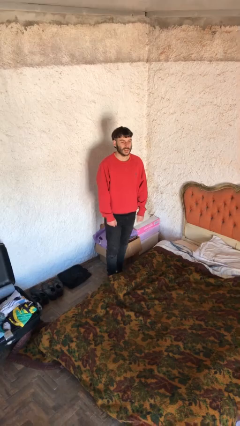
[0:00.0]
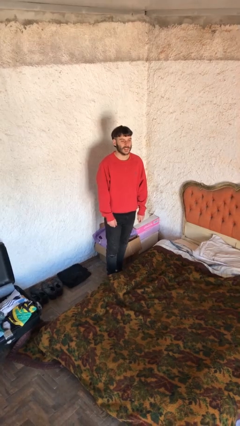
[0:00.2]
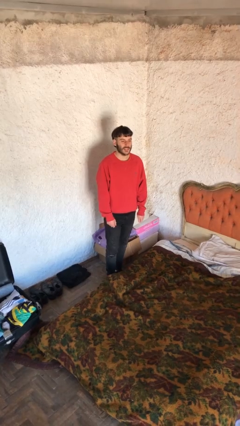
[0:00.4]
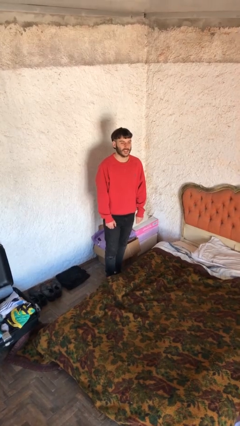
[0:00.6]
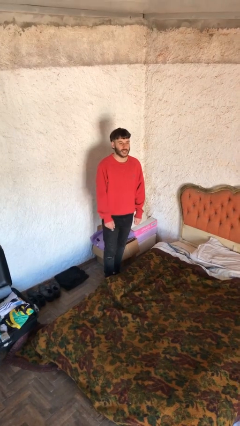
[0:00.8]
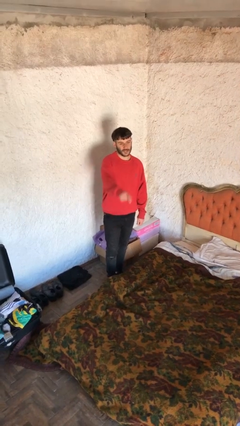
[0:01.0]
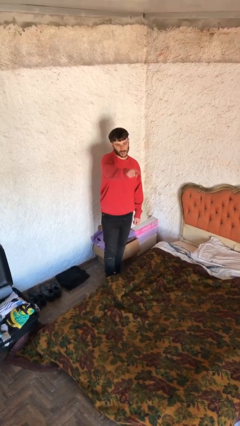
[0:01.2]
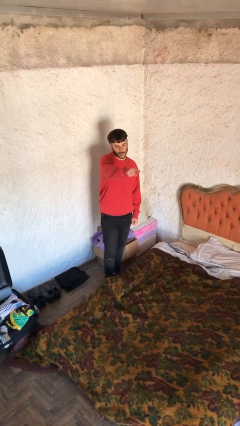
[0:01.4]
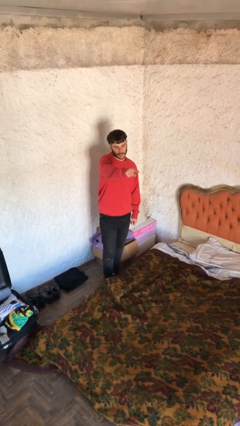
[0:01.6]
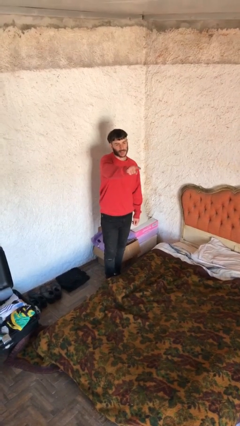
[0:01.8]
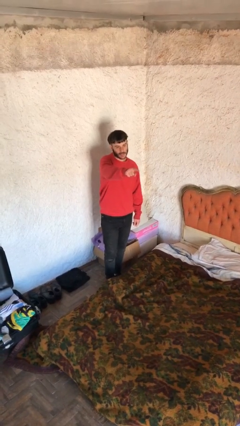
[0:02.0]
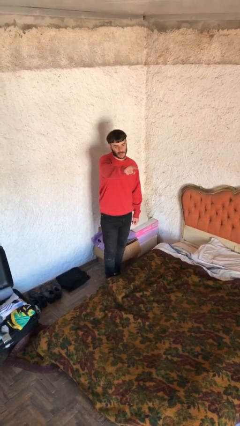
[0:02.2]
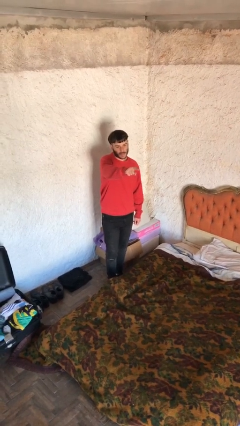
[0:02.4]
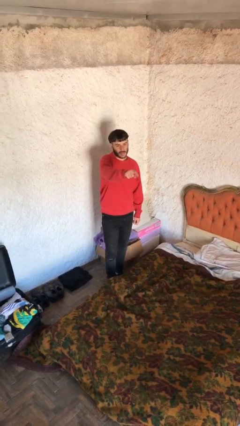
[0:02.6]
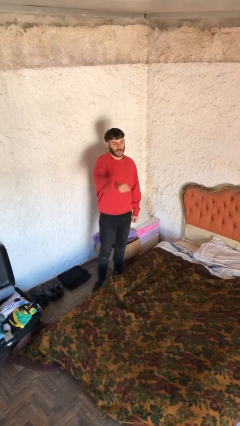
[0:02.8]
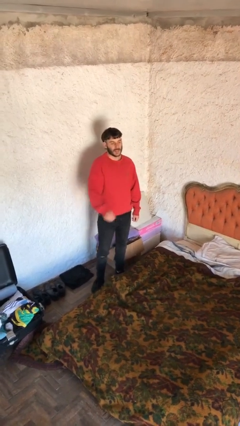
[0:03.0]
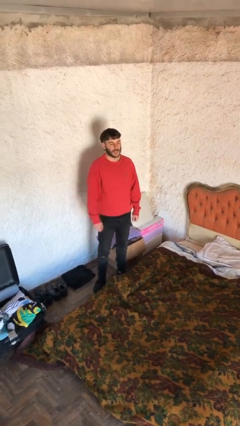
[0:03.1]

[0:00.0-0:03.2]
person points at person

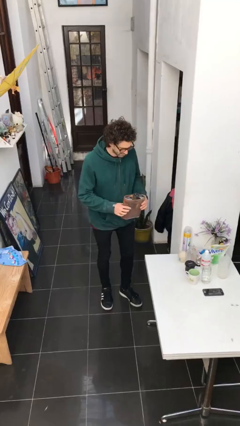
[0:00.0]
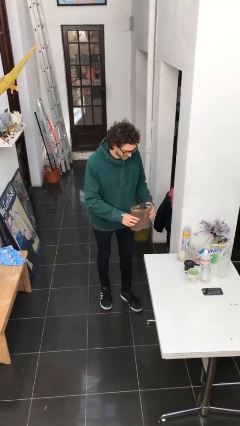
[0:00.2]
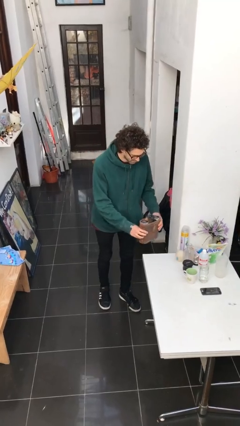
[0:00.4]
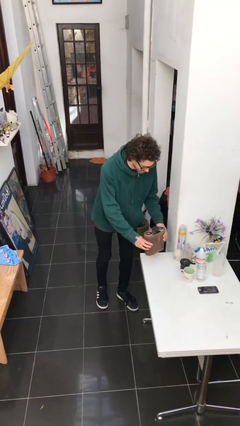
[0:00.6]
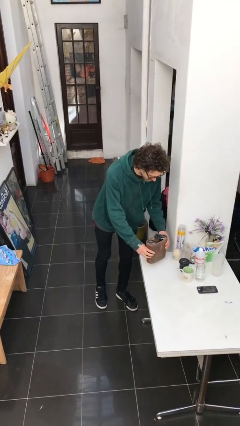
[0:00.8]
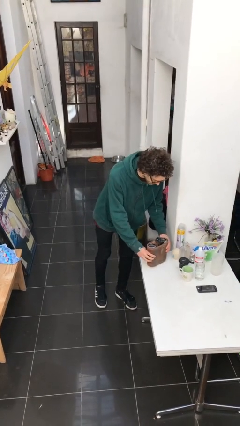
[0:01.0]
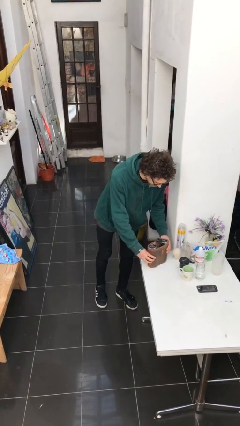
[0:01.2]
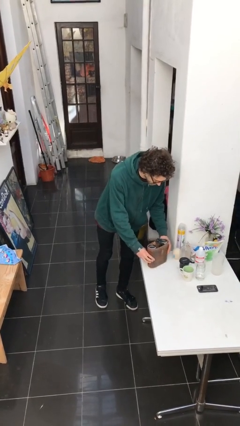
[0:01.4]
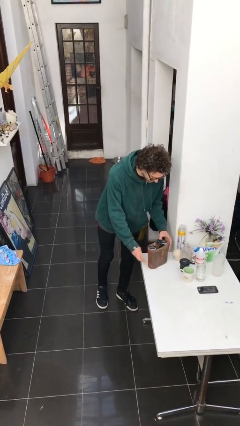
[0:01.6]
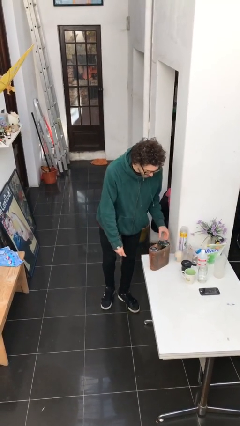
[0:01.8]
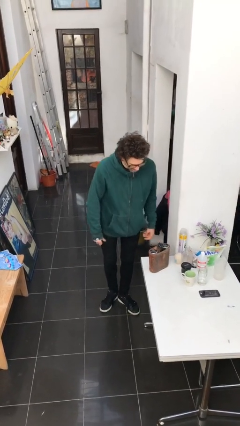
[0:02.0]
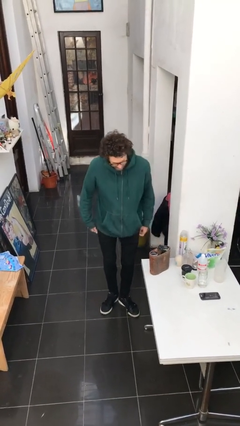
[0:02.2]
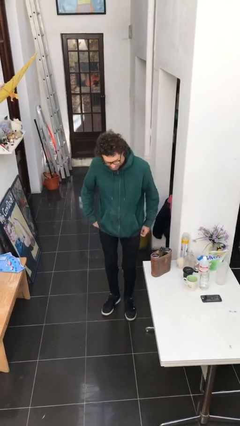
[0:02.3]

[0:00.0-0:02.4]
person puts down object on table

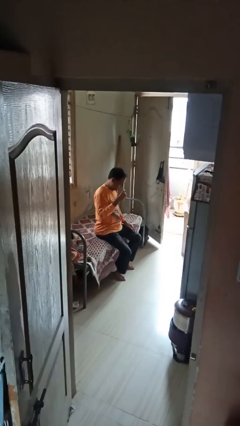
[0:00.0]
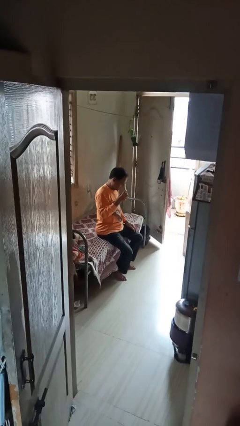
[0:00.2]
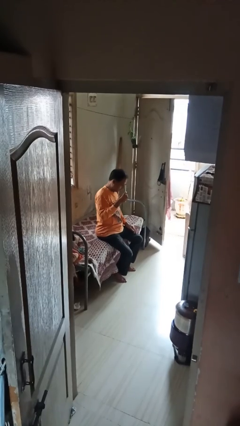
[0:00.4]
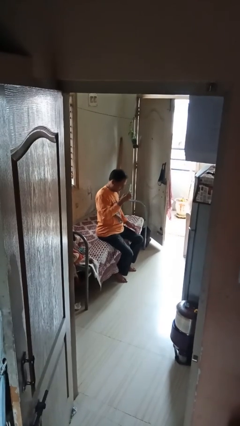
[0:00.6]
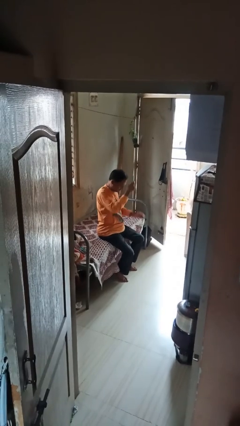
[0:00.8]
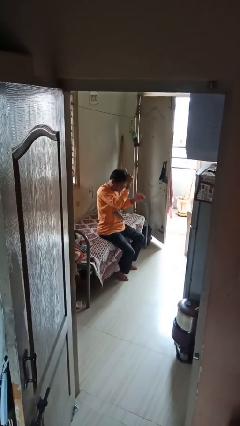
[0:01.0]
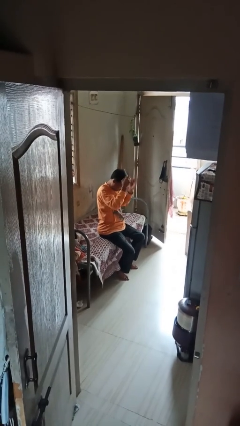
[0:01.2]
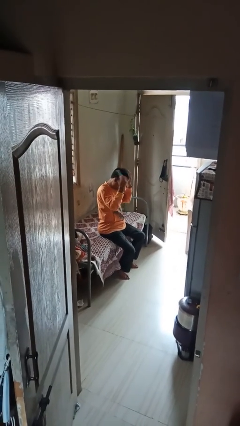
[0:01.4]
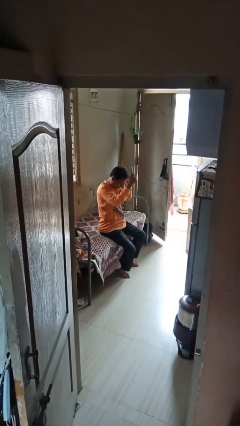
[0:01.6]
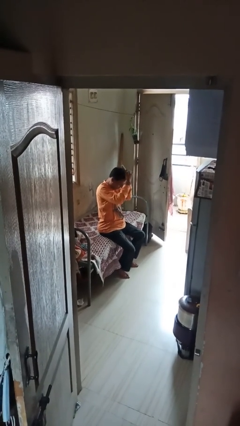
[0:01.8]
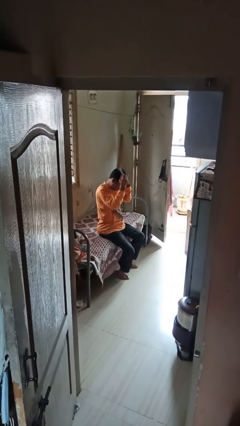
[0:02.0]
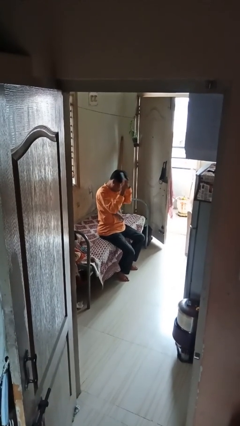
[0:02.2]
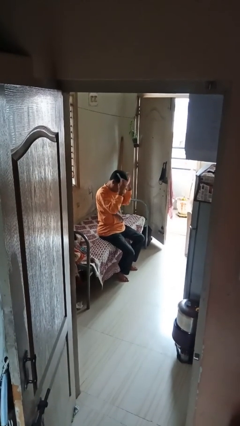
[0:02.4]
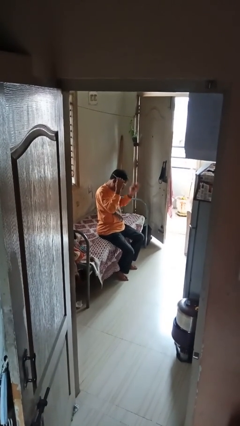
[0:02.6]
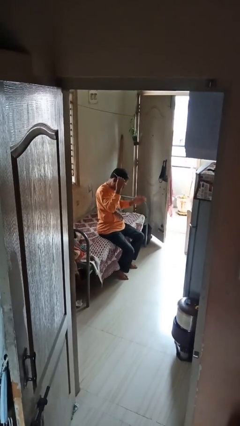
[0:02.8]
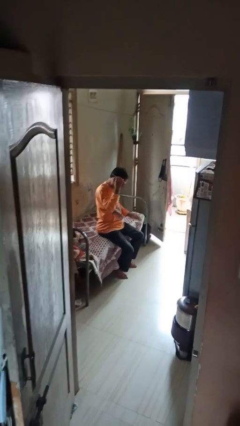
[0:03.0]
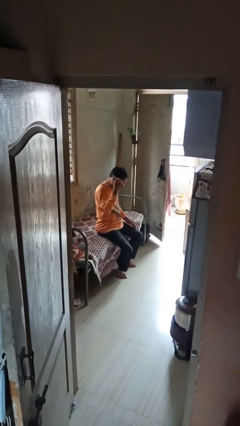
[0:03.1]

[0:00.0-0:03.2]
person brushes hair

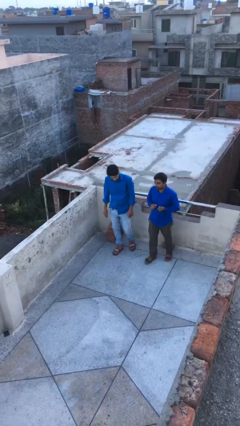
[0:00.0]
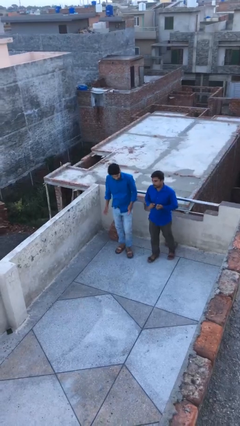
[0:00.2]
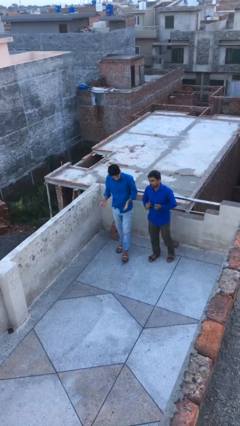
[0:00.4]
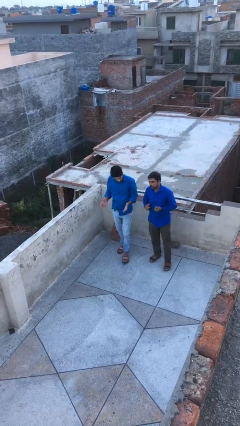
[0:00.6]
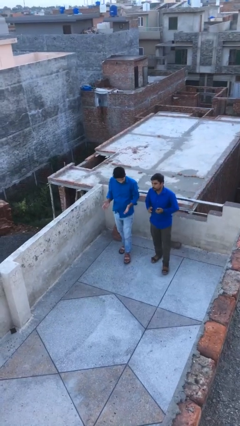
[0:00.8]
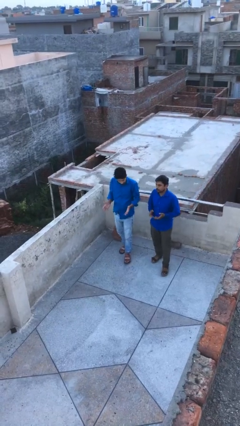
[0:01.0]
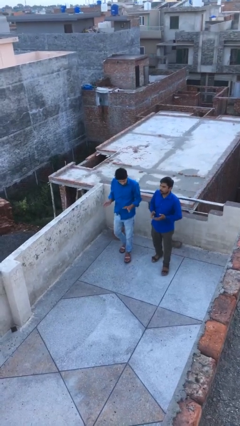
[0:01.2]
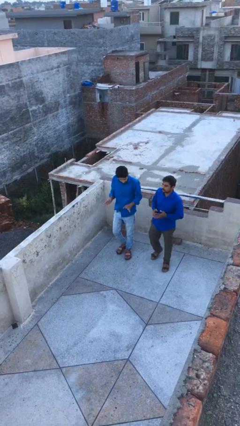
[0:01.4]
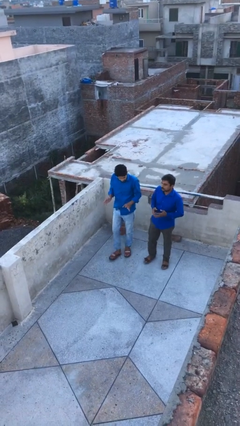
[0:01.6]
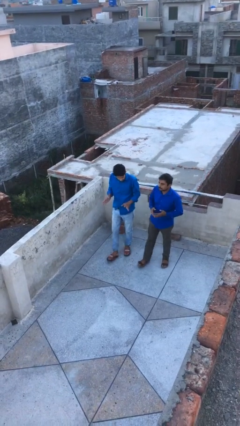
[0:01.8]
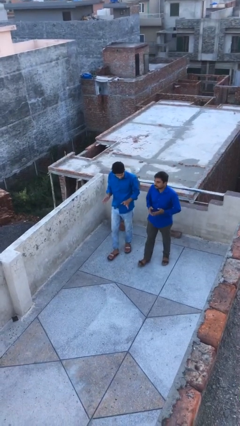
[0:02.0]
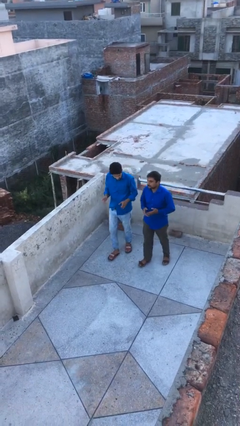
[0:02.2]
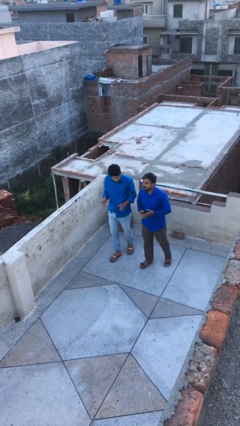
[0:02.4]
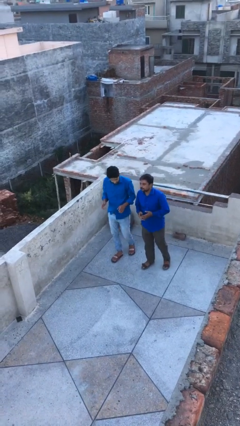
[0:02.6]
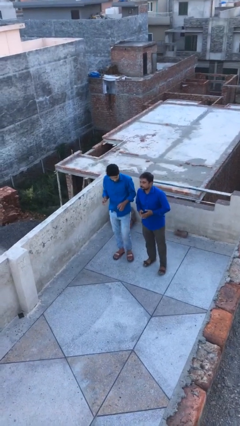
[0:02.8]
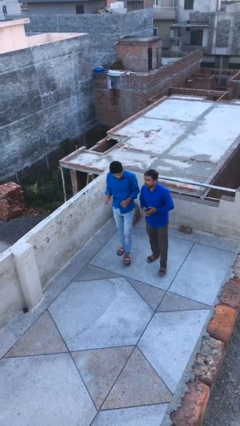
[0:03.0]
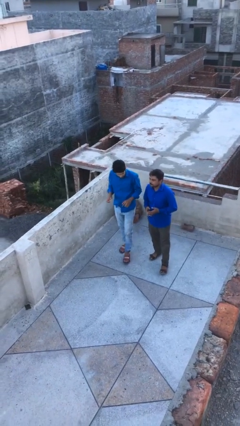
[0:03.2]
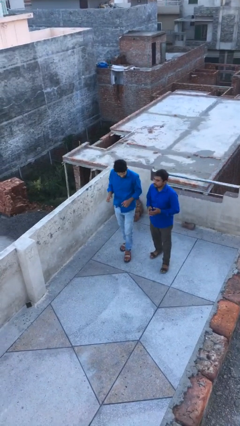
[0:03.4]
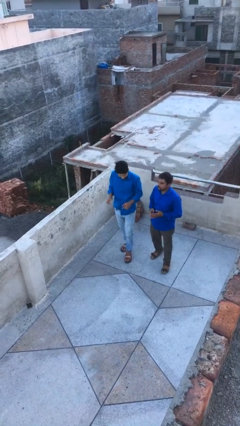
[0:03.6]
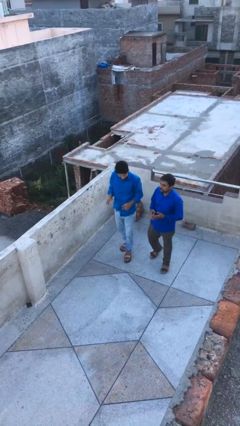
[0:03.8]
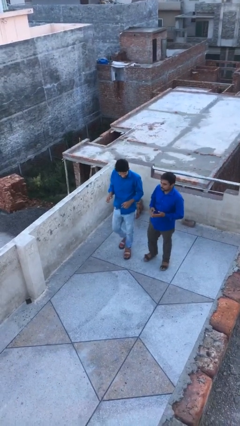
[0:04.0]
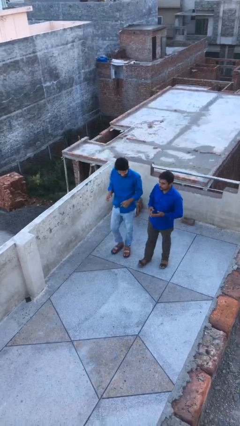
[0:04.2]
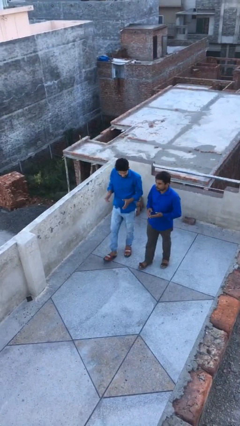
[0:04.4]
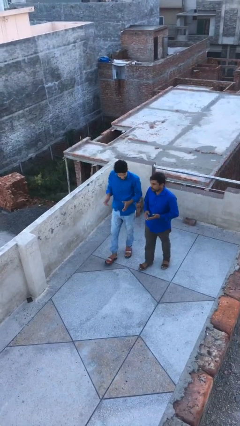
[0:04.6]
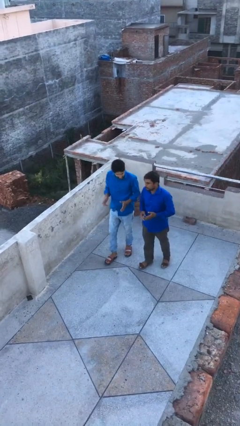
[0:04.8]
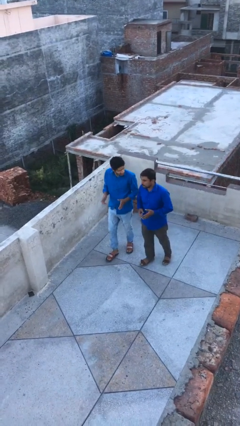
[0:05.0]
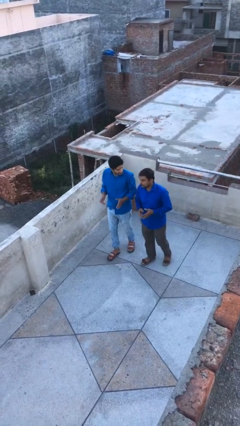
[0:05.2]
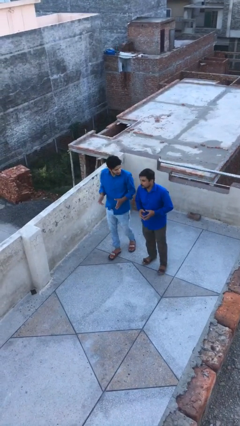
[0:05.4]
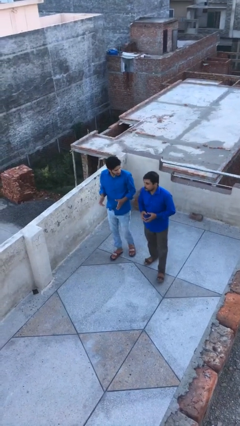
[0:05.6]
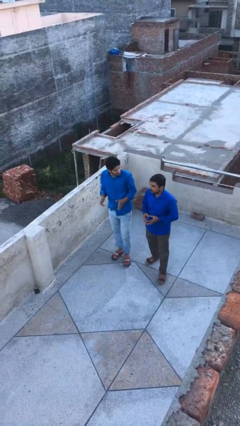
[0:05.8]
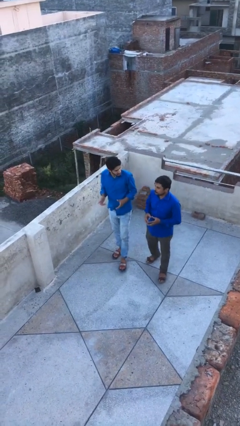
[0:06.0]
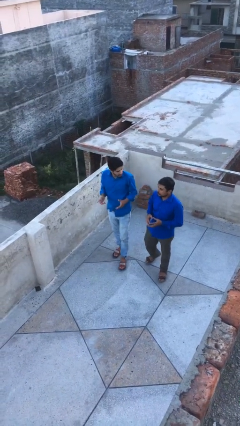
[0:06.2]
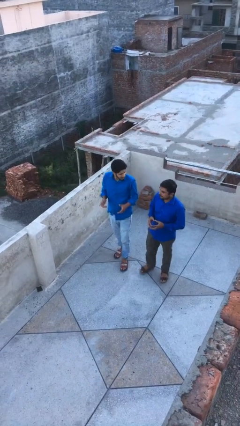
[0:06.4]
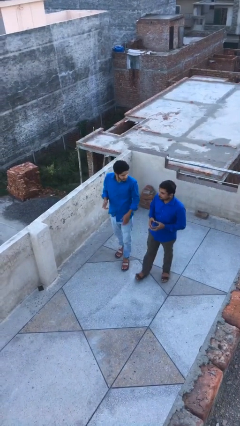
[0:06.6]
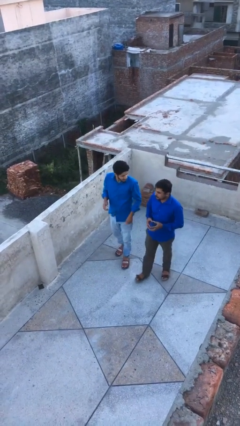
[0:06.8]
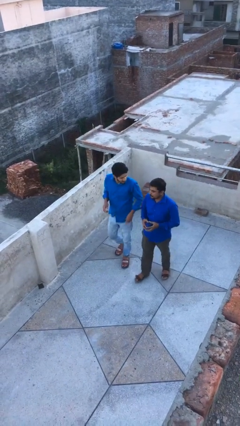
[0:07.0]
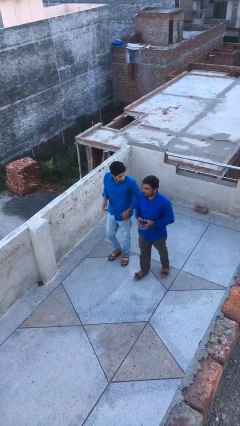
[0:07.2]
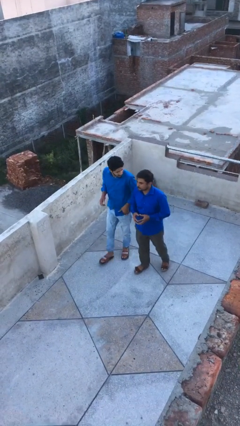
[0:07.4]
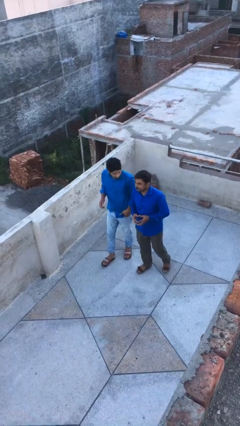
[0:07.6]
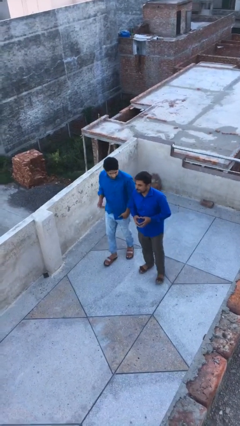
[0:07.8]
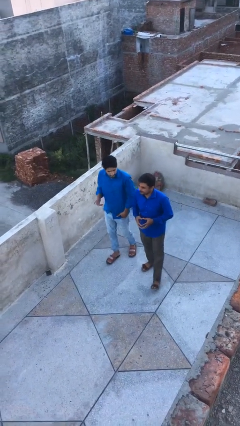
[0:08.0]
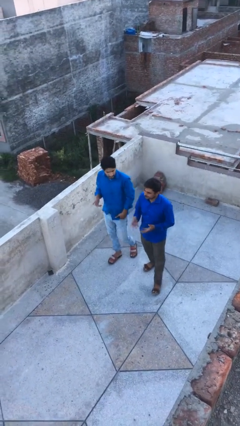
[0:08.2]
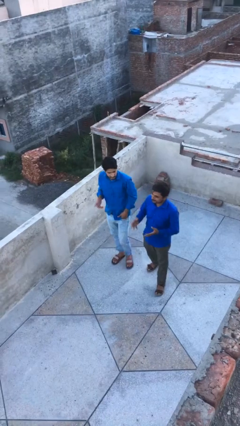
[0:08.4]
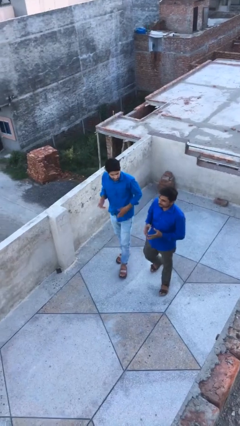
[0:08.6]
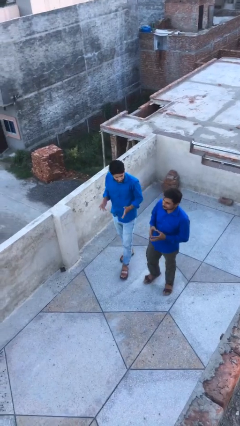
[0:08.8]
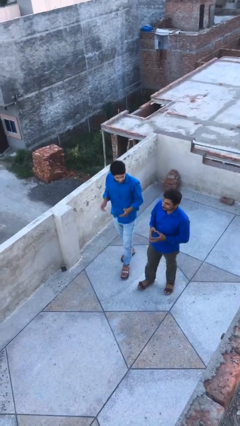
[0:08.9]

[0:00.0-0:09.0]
person talks to person

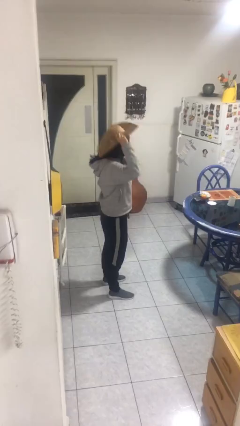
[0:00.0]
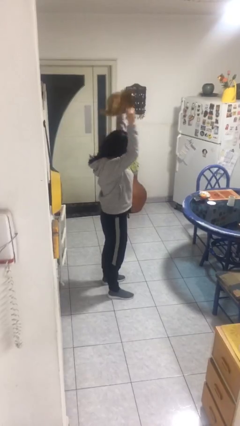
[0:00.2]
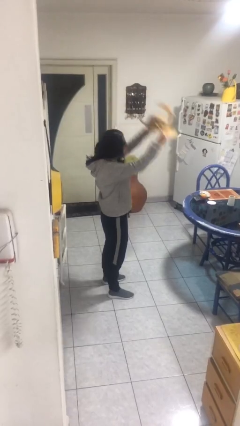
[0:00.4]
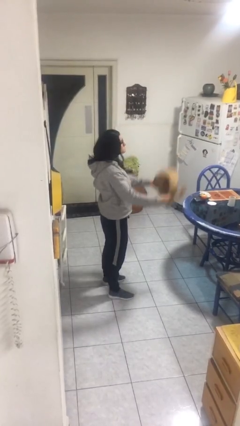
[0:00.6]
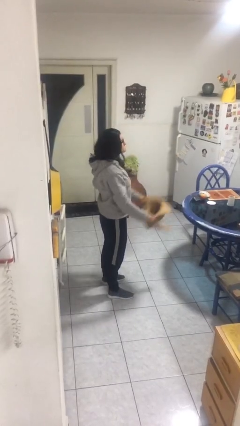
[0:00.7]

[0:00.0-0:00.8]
person takes off hat
